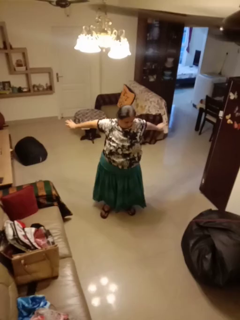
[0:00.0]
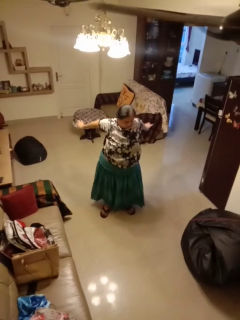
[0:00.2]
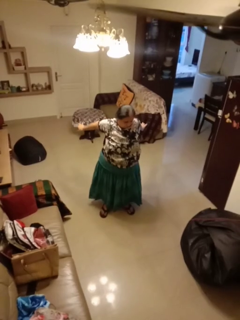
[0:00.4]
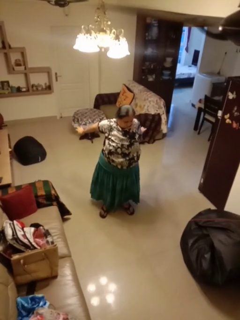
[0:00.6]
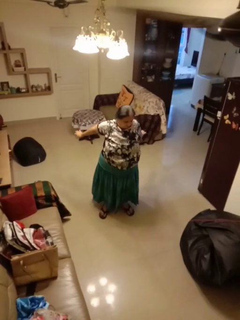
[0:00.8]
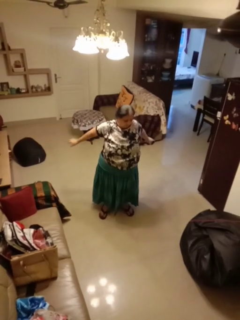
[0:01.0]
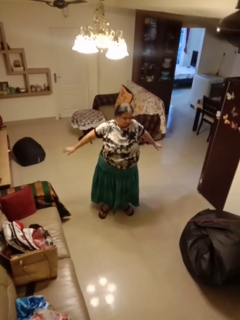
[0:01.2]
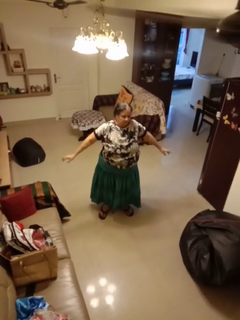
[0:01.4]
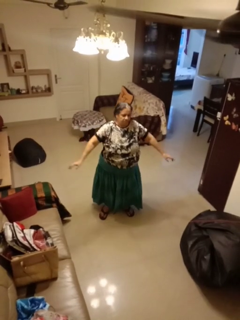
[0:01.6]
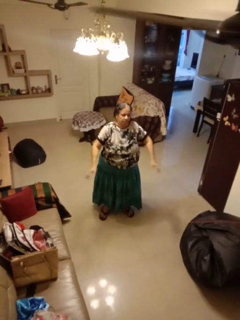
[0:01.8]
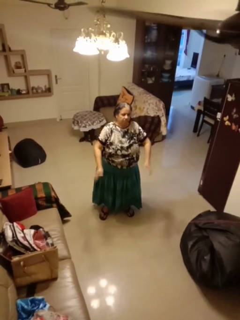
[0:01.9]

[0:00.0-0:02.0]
person stretches arms to side

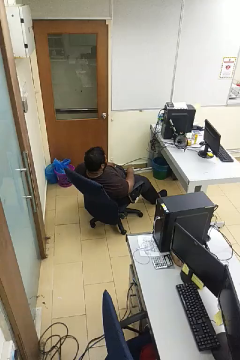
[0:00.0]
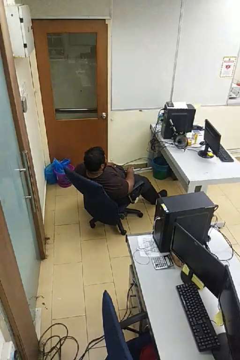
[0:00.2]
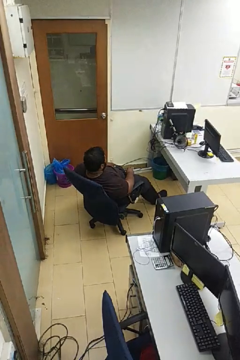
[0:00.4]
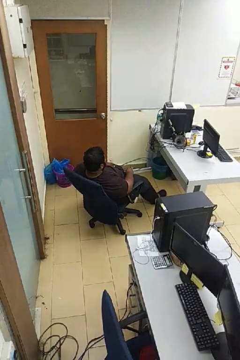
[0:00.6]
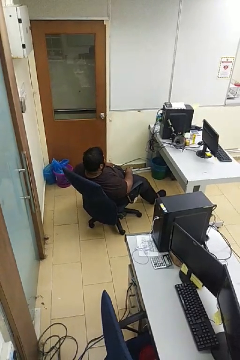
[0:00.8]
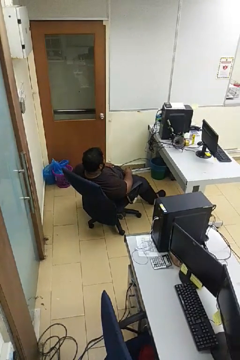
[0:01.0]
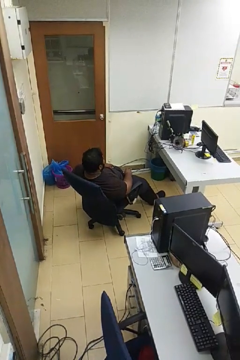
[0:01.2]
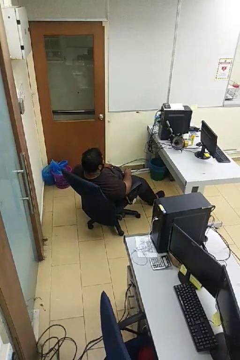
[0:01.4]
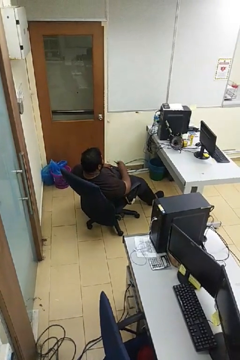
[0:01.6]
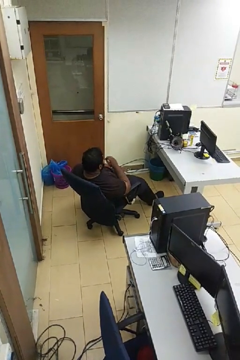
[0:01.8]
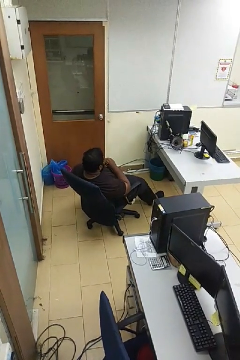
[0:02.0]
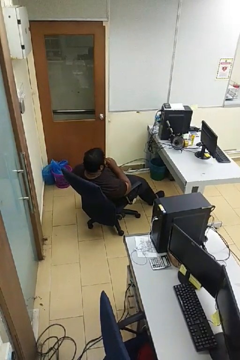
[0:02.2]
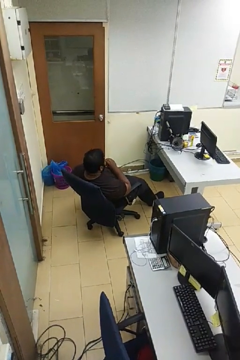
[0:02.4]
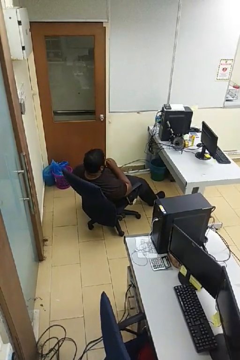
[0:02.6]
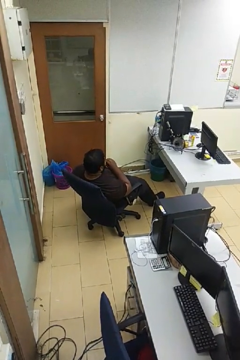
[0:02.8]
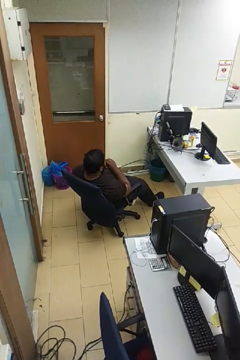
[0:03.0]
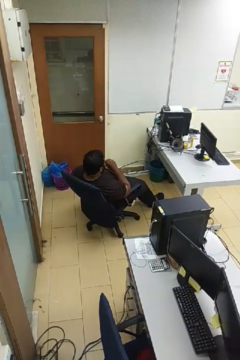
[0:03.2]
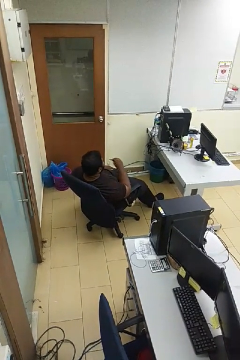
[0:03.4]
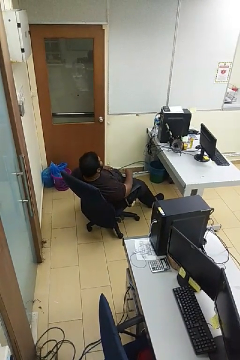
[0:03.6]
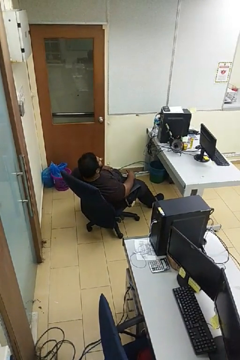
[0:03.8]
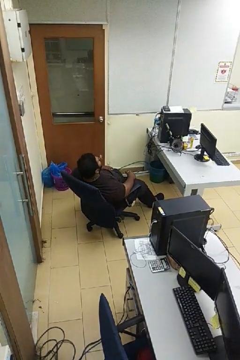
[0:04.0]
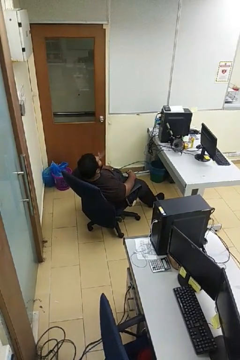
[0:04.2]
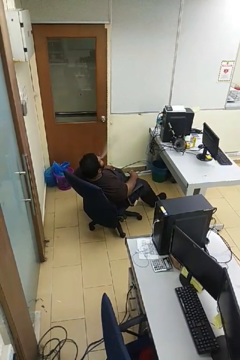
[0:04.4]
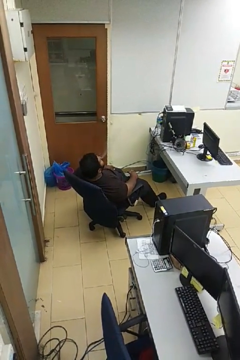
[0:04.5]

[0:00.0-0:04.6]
person vapes

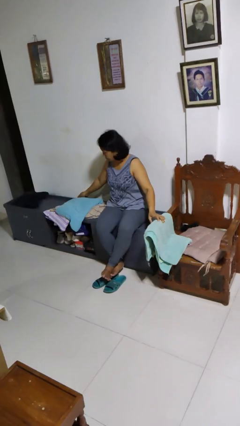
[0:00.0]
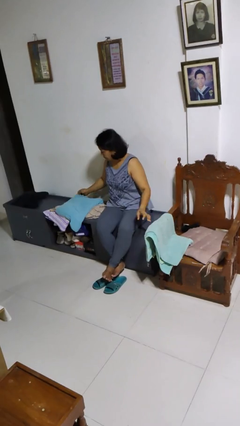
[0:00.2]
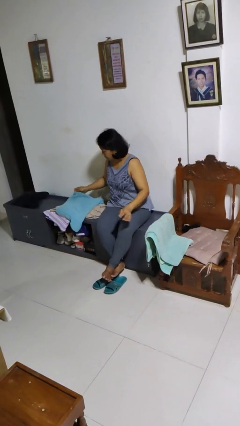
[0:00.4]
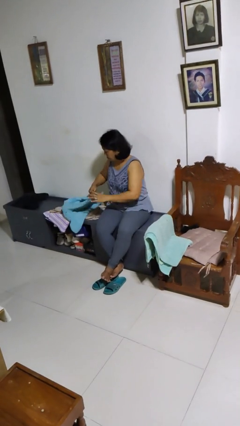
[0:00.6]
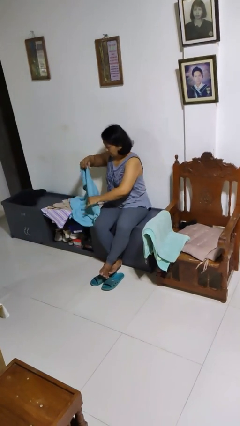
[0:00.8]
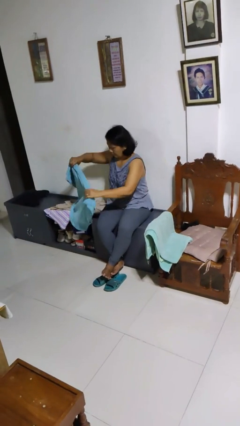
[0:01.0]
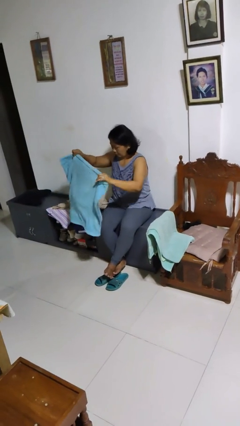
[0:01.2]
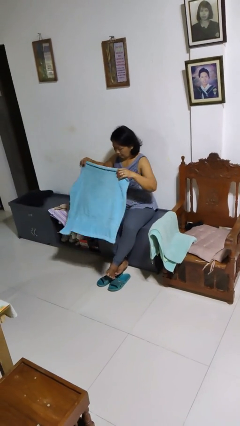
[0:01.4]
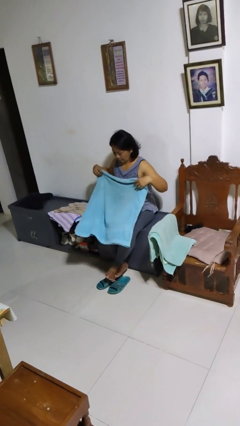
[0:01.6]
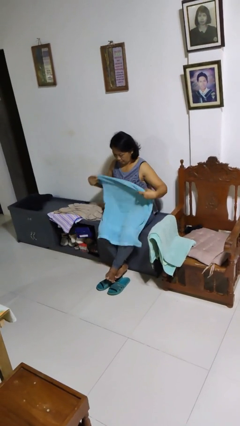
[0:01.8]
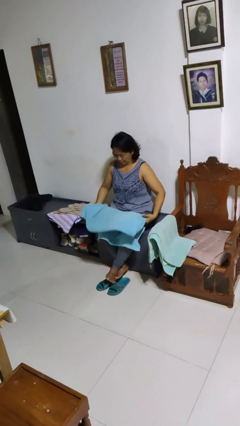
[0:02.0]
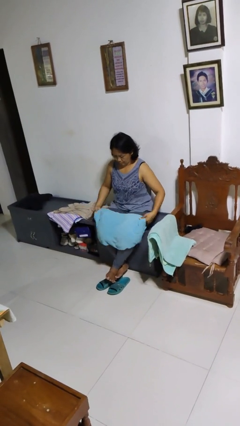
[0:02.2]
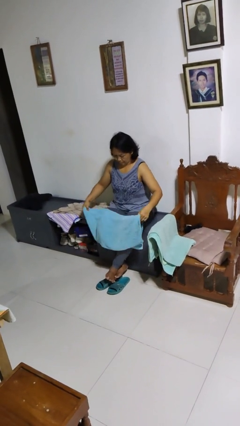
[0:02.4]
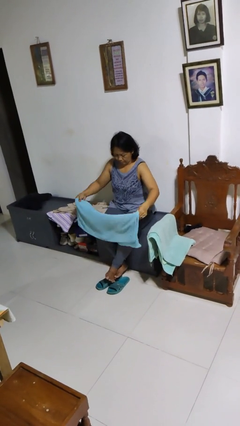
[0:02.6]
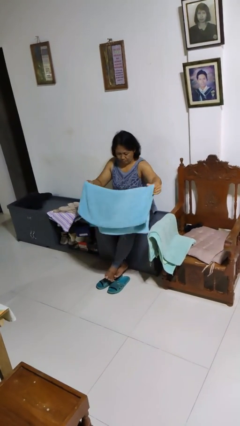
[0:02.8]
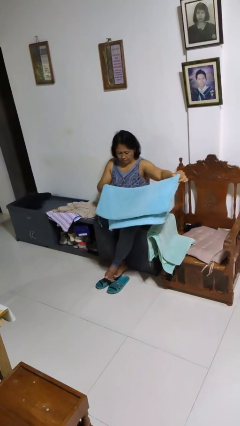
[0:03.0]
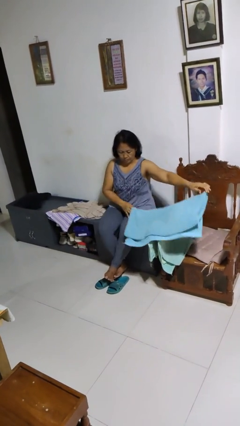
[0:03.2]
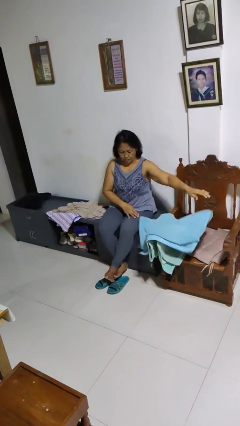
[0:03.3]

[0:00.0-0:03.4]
person folds towel

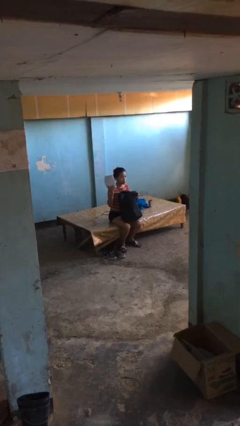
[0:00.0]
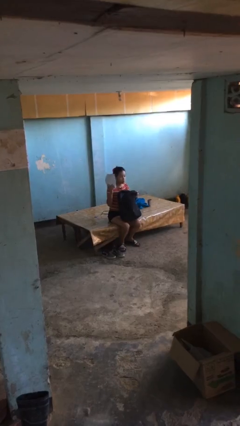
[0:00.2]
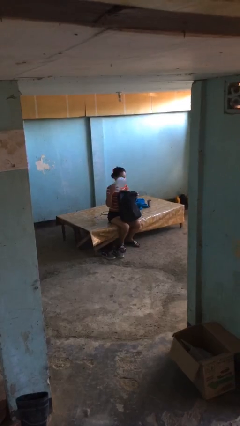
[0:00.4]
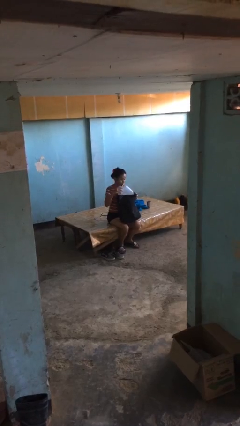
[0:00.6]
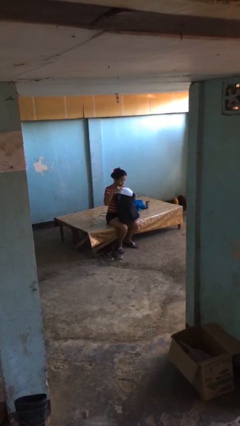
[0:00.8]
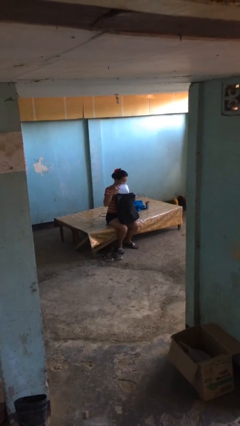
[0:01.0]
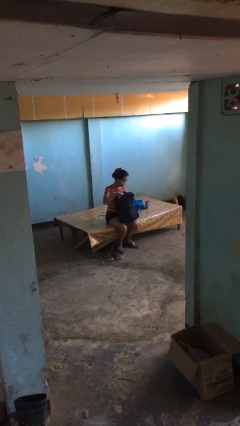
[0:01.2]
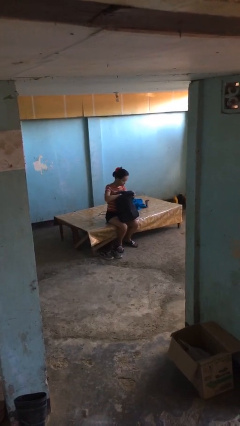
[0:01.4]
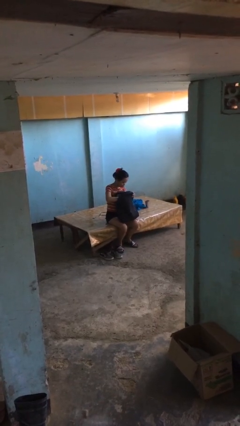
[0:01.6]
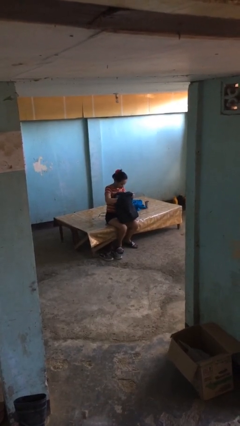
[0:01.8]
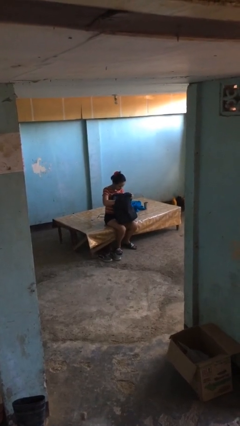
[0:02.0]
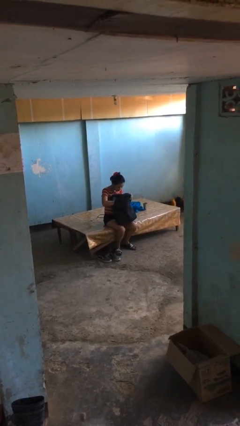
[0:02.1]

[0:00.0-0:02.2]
person puts object into backpack

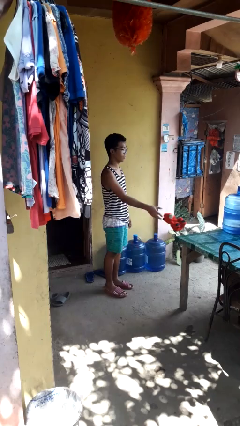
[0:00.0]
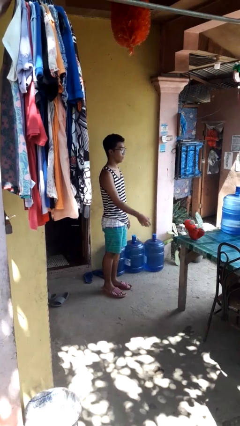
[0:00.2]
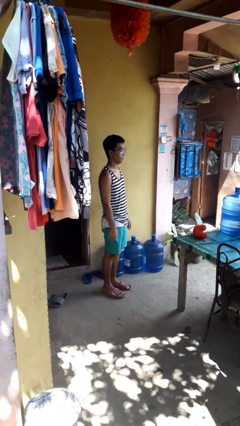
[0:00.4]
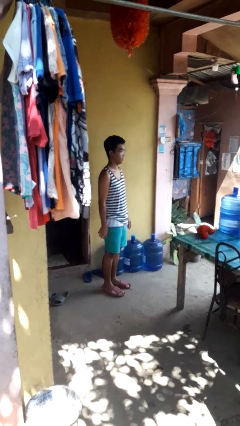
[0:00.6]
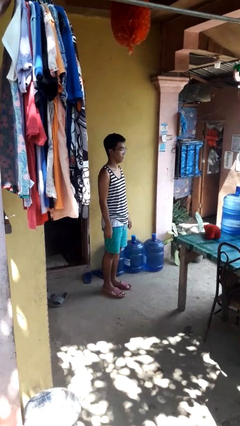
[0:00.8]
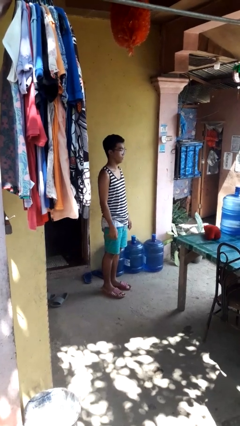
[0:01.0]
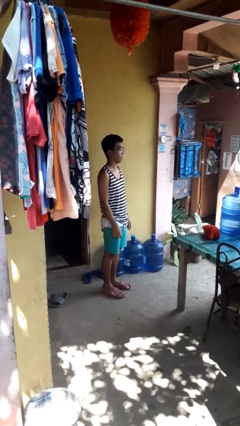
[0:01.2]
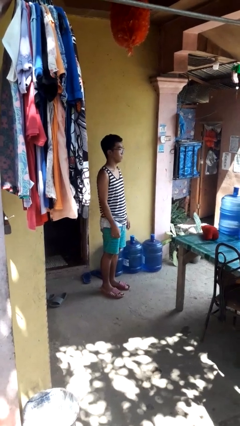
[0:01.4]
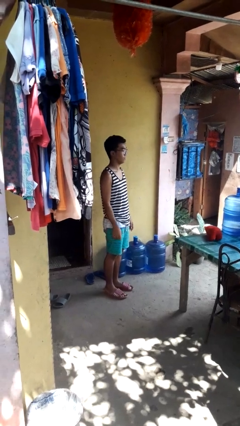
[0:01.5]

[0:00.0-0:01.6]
person throws object on table

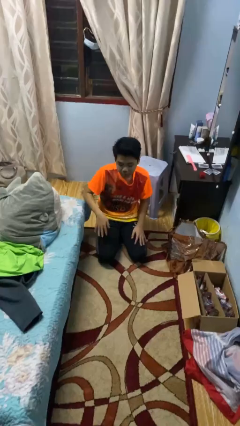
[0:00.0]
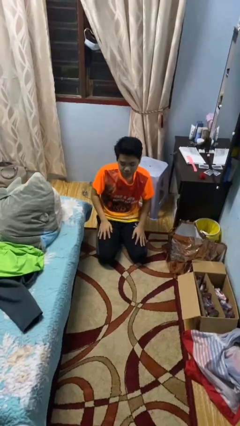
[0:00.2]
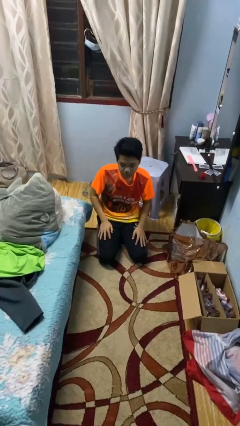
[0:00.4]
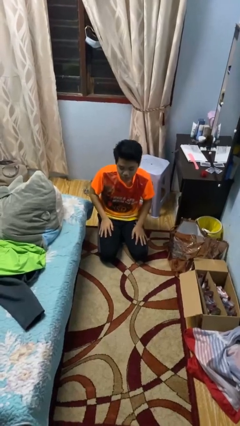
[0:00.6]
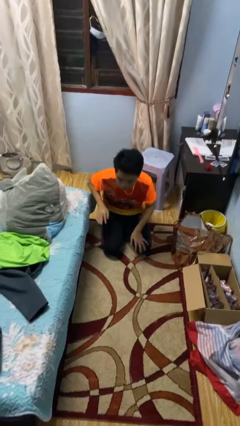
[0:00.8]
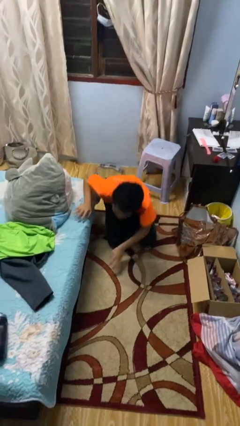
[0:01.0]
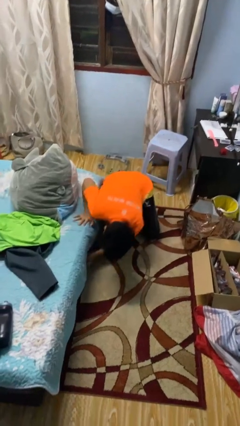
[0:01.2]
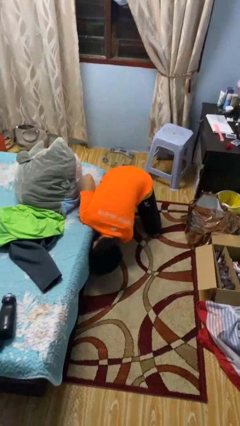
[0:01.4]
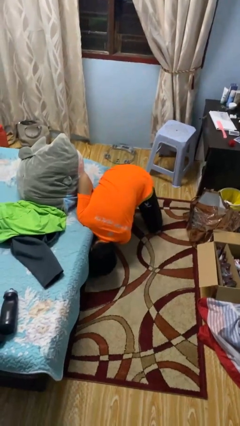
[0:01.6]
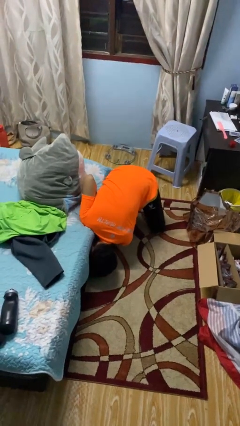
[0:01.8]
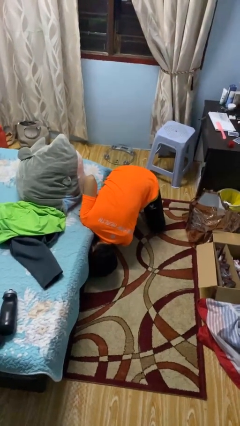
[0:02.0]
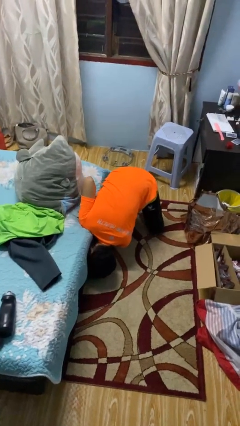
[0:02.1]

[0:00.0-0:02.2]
person searches under bed

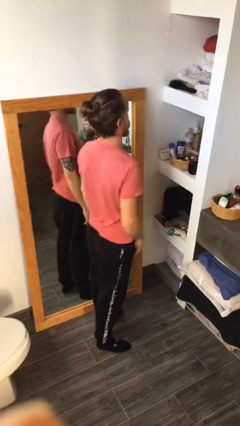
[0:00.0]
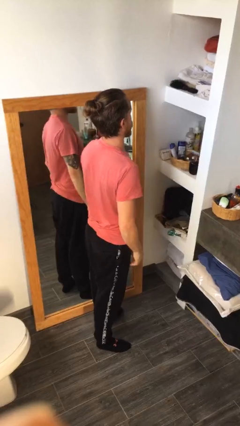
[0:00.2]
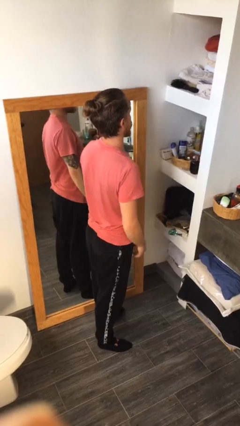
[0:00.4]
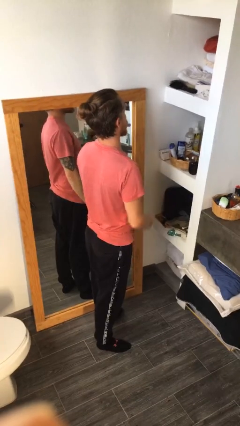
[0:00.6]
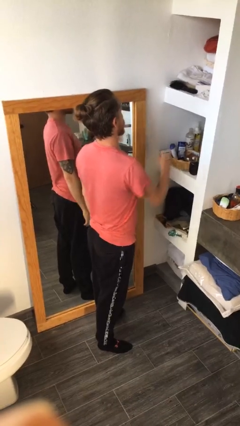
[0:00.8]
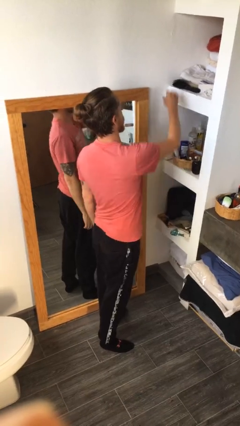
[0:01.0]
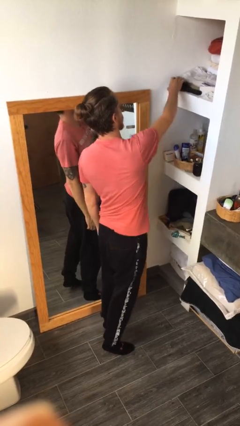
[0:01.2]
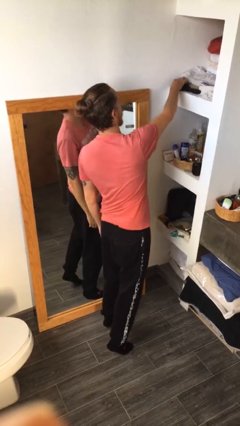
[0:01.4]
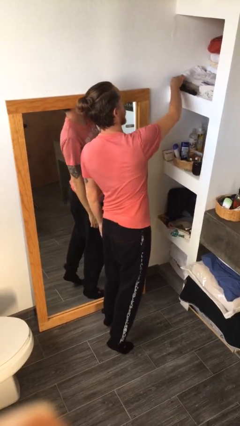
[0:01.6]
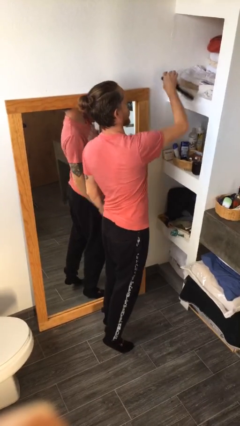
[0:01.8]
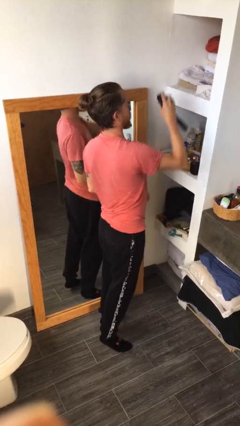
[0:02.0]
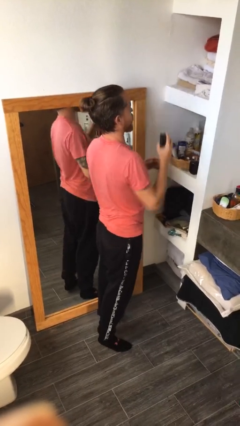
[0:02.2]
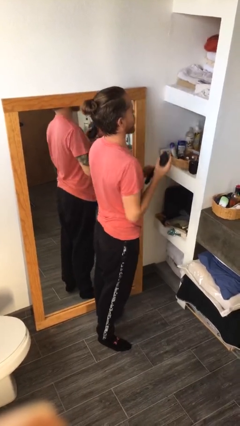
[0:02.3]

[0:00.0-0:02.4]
person picks up object from countertop

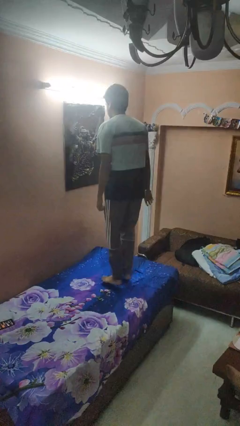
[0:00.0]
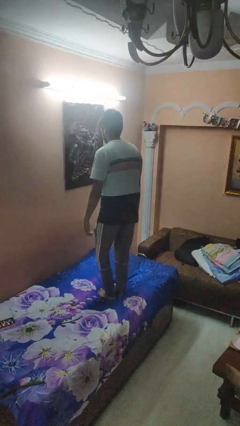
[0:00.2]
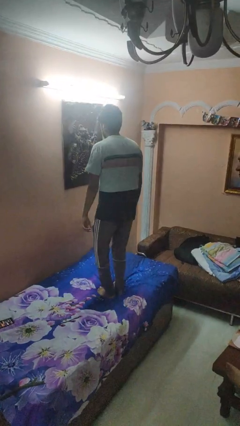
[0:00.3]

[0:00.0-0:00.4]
person jumps on bed
